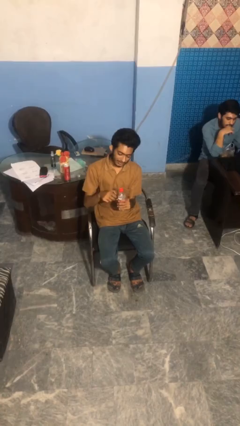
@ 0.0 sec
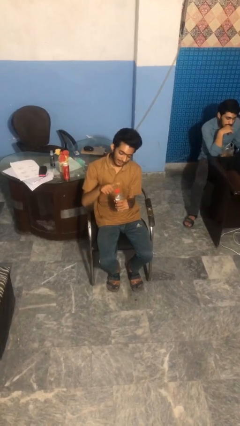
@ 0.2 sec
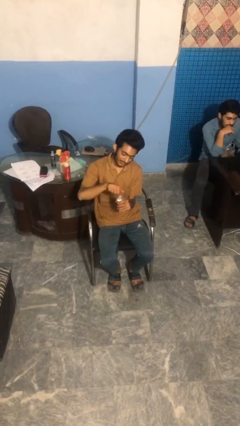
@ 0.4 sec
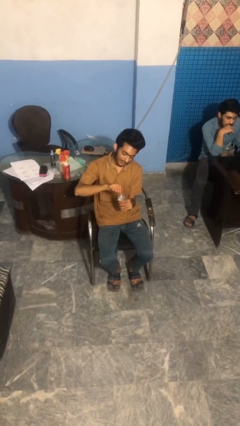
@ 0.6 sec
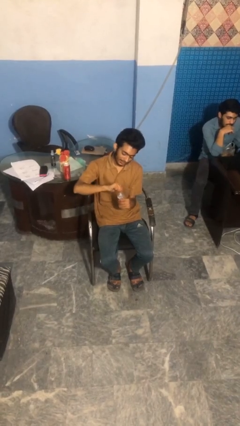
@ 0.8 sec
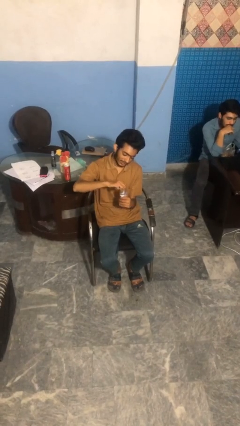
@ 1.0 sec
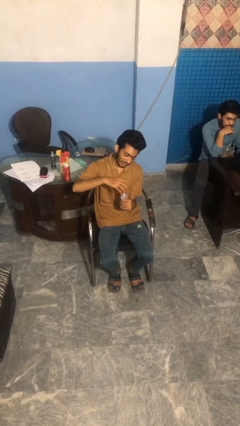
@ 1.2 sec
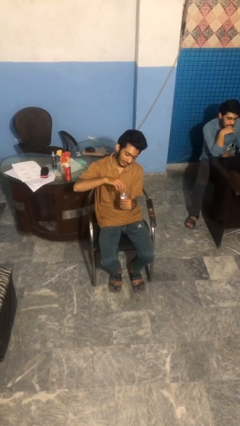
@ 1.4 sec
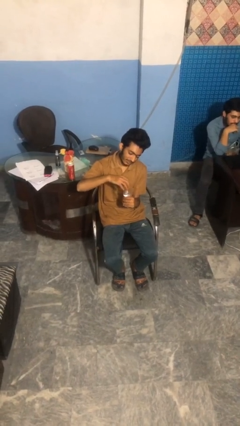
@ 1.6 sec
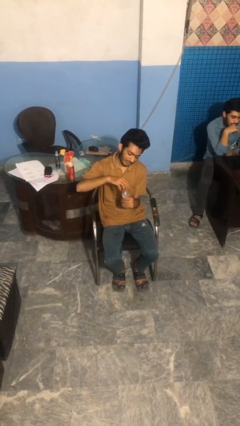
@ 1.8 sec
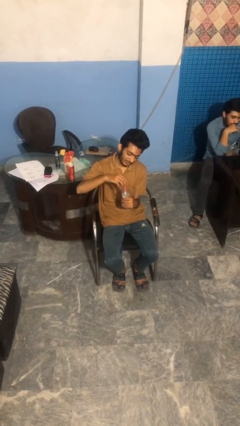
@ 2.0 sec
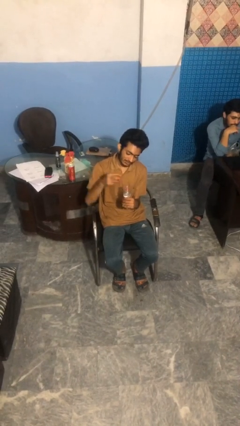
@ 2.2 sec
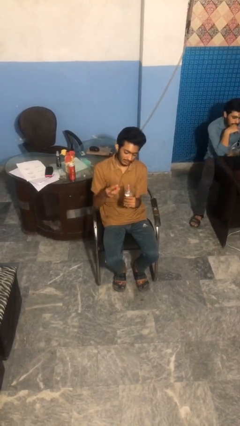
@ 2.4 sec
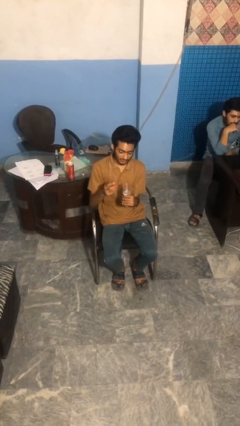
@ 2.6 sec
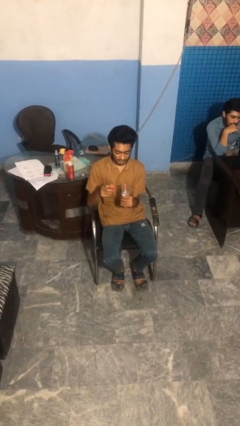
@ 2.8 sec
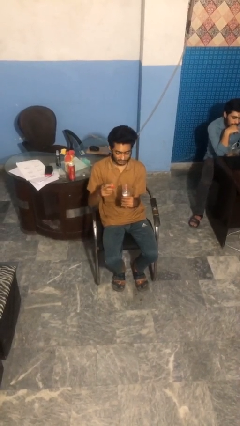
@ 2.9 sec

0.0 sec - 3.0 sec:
person unscrews lid from bottle

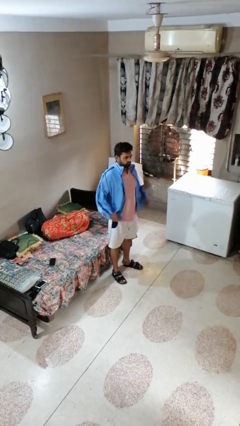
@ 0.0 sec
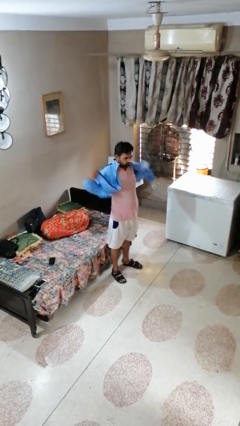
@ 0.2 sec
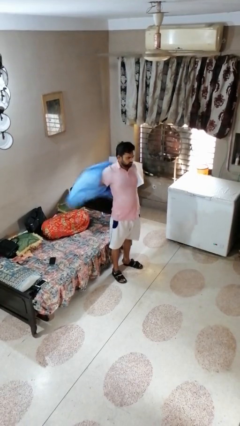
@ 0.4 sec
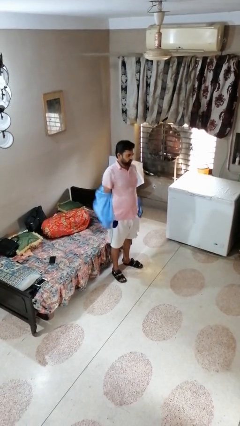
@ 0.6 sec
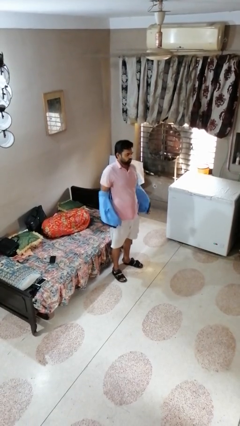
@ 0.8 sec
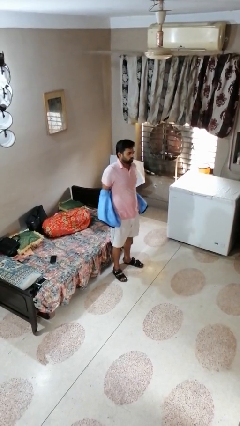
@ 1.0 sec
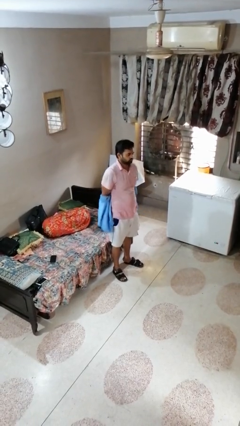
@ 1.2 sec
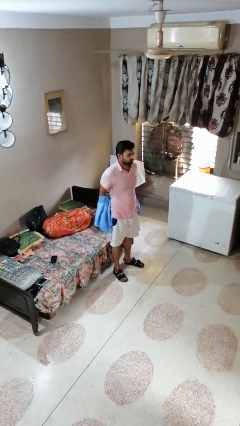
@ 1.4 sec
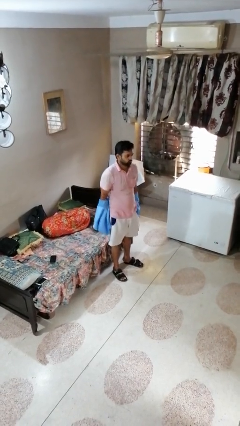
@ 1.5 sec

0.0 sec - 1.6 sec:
person takes off jacket

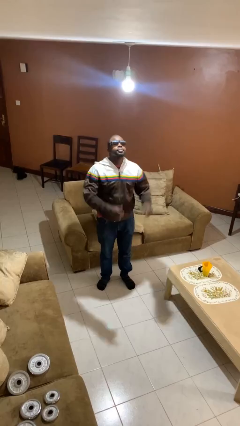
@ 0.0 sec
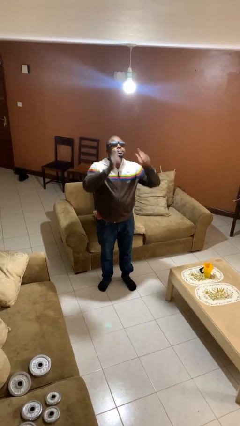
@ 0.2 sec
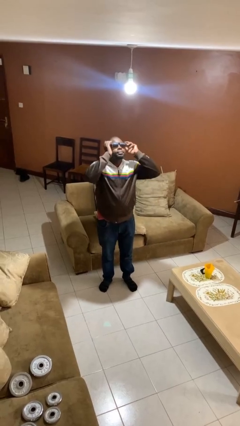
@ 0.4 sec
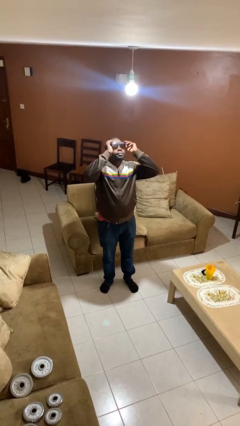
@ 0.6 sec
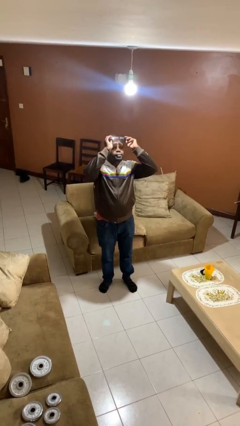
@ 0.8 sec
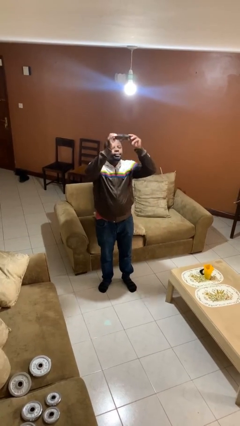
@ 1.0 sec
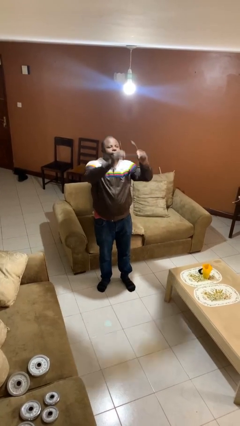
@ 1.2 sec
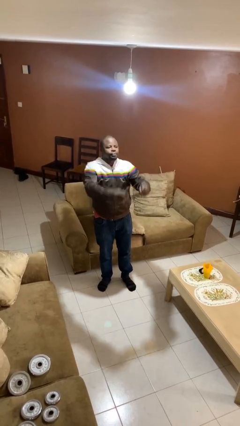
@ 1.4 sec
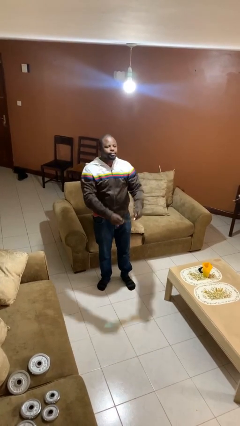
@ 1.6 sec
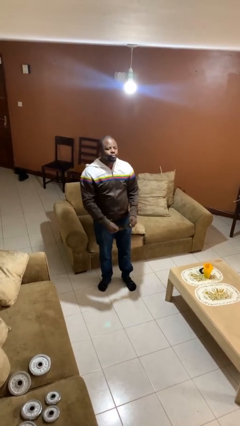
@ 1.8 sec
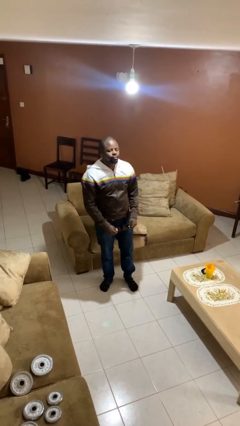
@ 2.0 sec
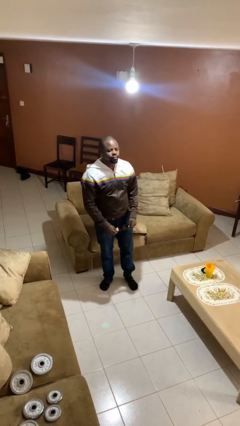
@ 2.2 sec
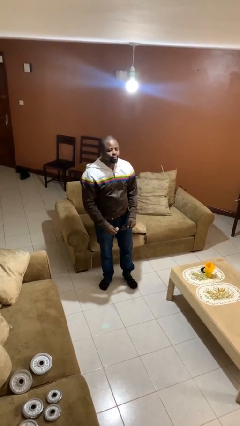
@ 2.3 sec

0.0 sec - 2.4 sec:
person takes off sunglasses

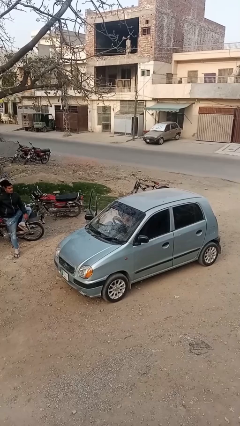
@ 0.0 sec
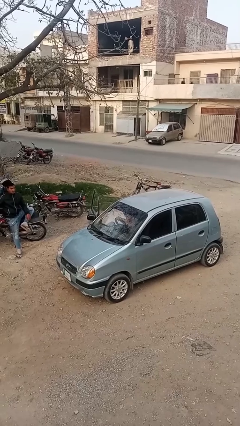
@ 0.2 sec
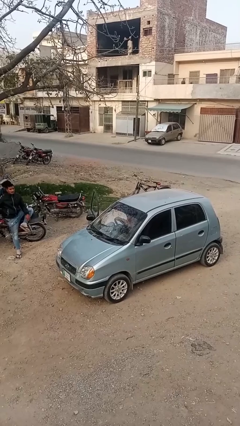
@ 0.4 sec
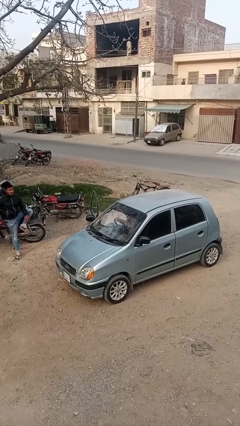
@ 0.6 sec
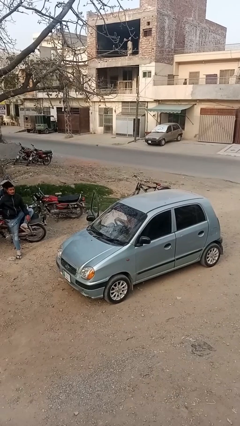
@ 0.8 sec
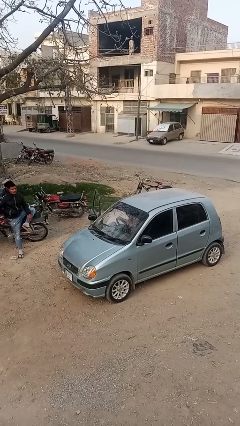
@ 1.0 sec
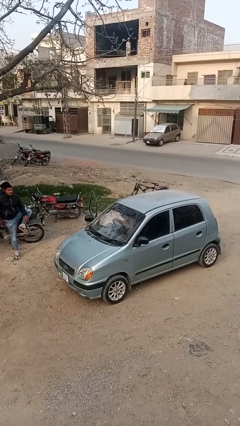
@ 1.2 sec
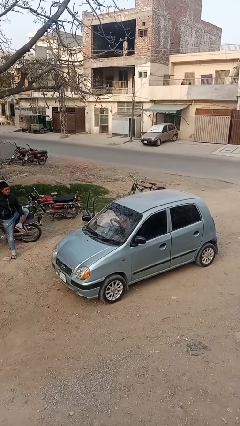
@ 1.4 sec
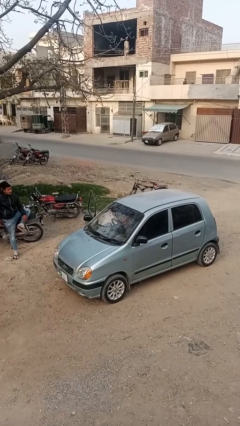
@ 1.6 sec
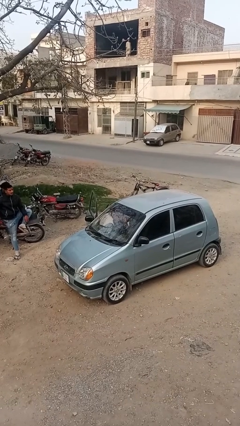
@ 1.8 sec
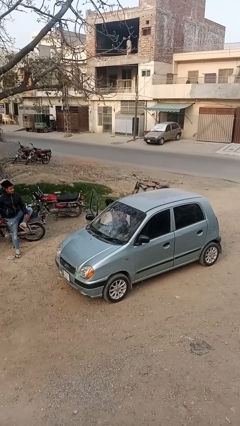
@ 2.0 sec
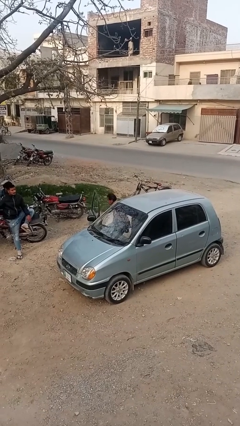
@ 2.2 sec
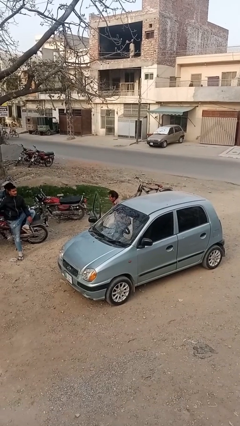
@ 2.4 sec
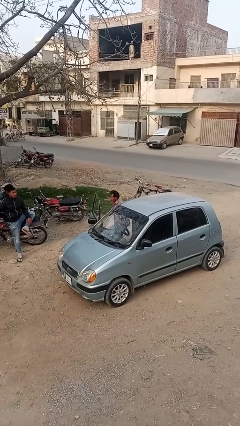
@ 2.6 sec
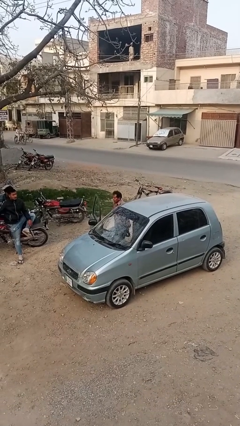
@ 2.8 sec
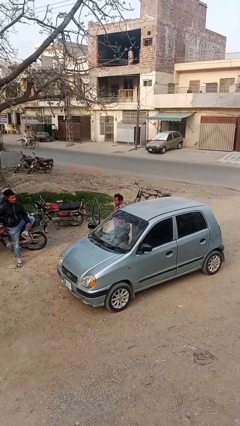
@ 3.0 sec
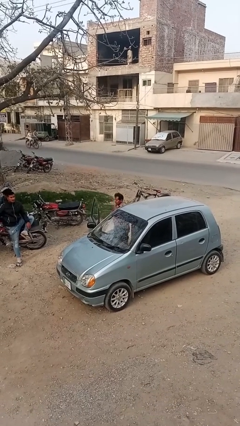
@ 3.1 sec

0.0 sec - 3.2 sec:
person exits car

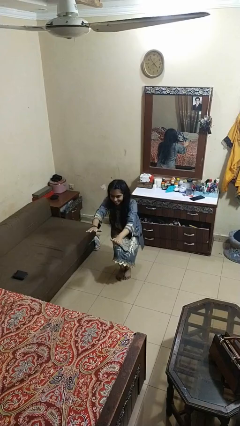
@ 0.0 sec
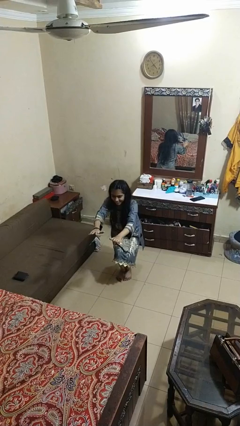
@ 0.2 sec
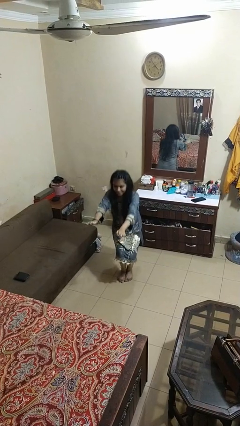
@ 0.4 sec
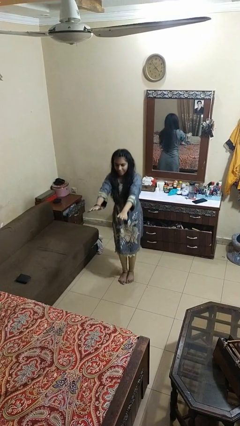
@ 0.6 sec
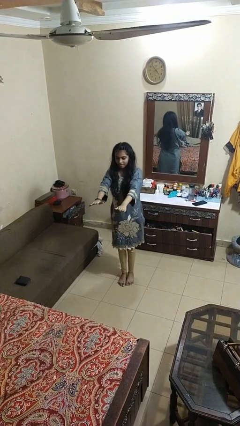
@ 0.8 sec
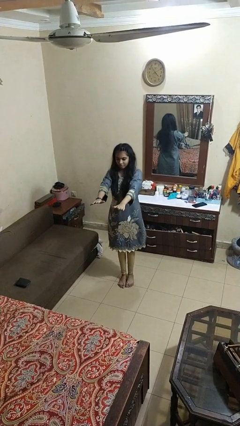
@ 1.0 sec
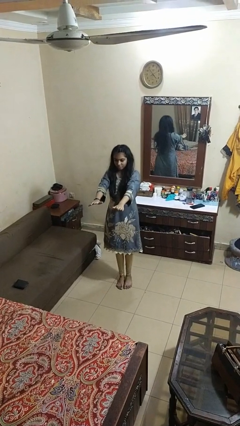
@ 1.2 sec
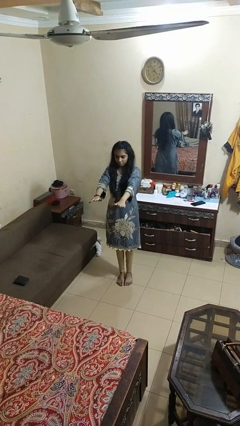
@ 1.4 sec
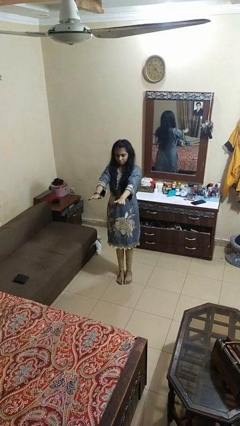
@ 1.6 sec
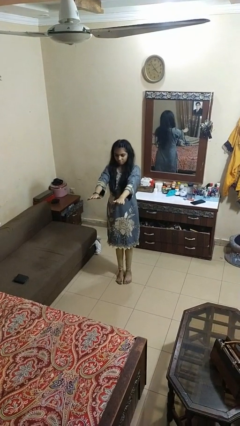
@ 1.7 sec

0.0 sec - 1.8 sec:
person stands up

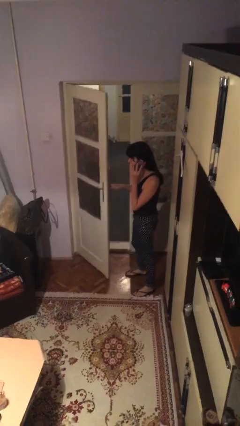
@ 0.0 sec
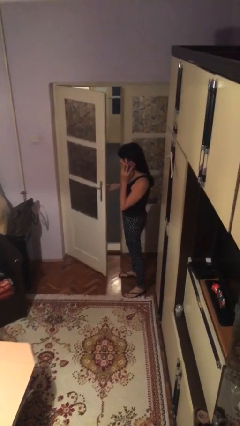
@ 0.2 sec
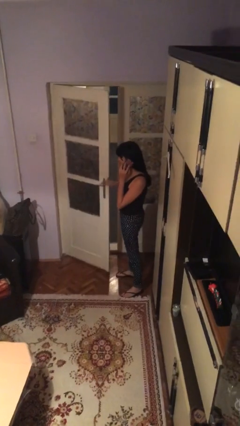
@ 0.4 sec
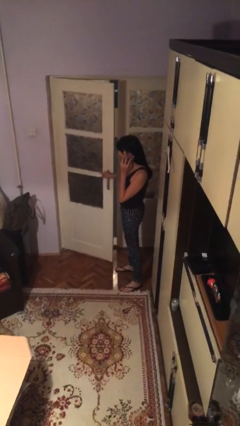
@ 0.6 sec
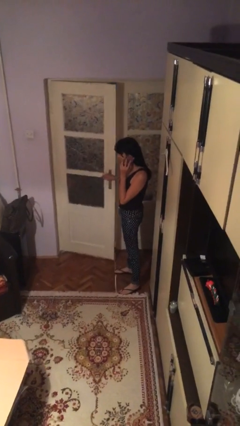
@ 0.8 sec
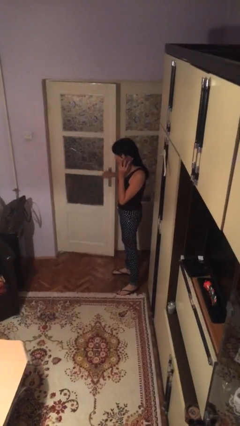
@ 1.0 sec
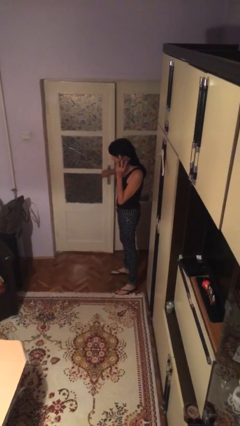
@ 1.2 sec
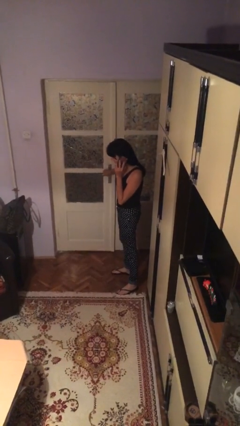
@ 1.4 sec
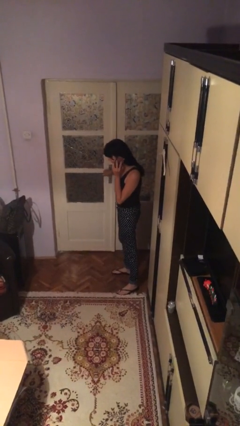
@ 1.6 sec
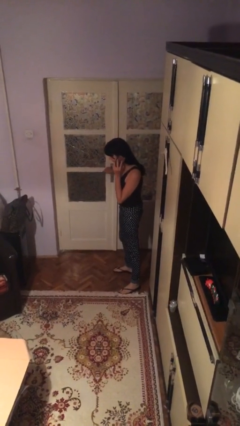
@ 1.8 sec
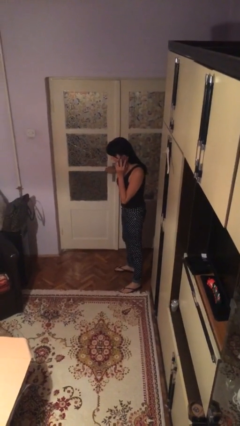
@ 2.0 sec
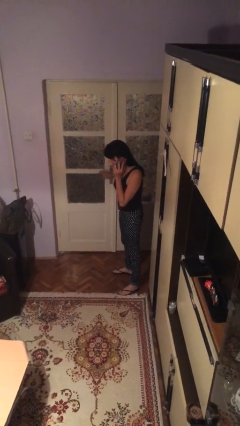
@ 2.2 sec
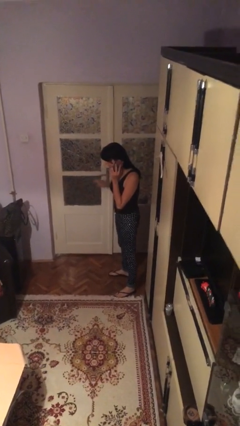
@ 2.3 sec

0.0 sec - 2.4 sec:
person closes facility door

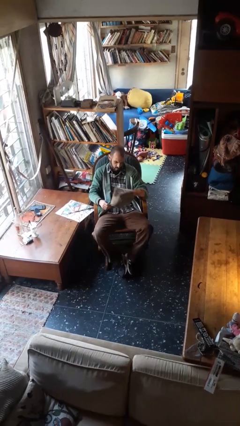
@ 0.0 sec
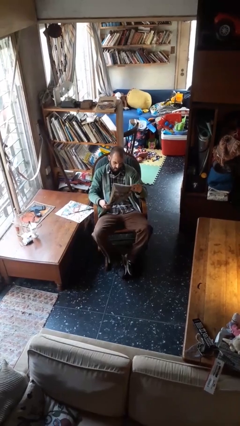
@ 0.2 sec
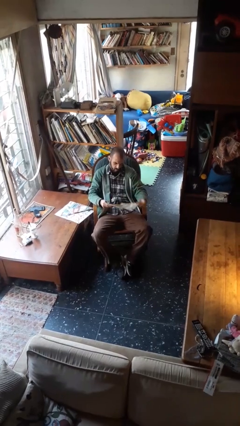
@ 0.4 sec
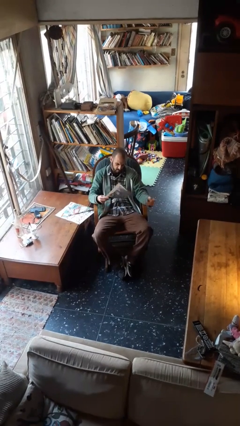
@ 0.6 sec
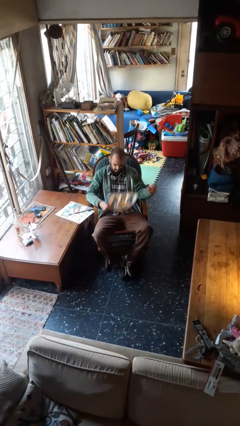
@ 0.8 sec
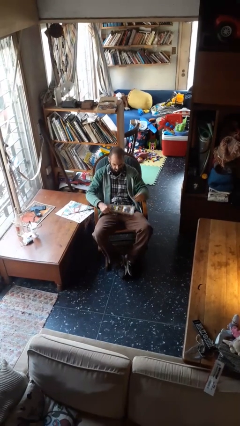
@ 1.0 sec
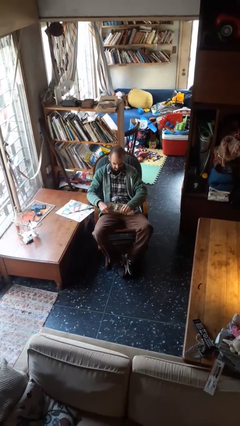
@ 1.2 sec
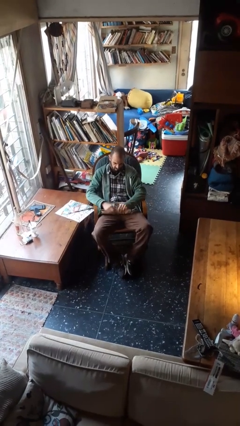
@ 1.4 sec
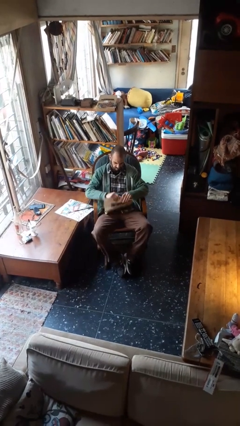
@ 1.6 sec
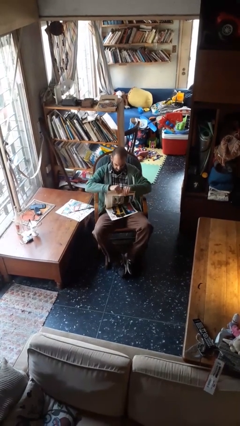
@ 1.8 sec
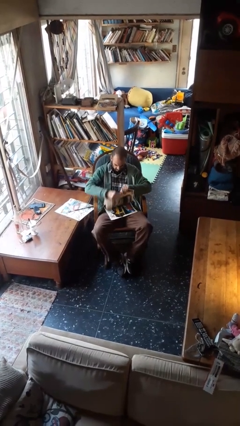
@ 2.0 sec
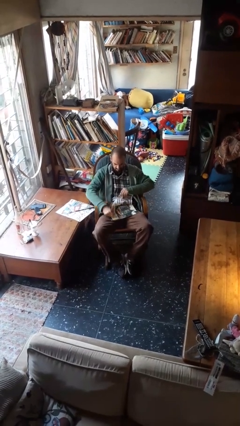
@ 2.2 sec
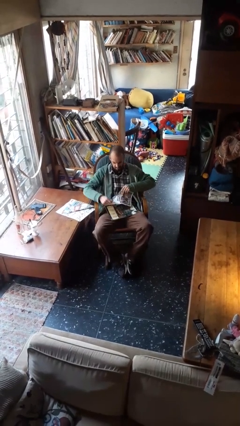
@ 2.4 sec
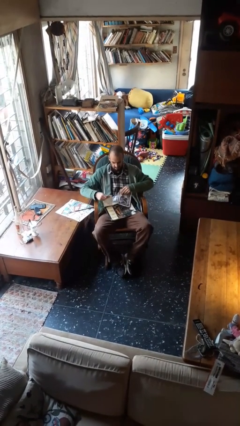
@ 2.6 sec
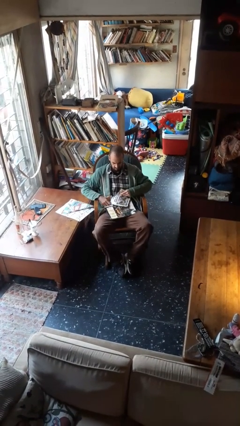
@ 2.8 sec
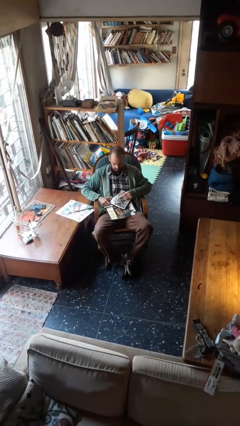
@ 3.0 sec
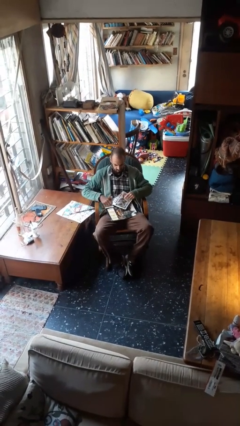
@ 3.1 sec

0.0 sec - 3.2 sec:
person tears paper
